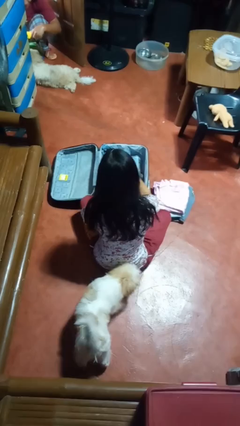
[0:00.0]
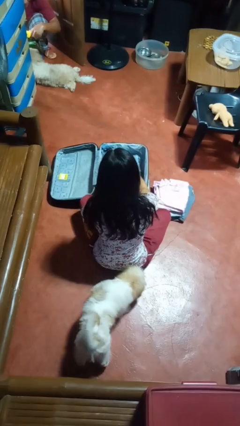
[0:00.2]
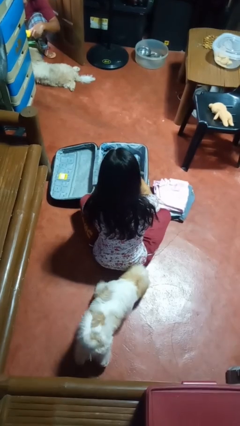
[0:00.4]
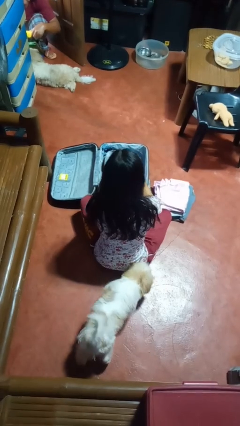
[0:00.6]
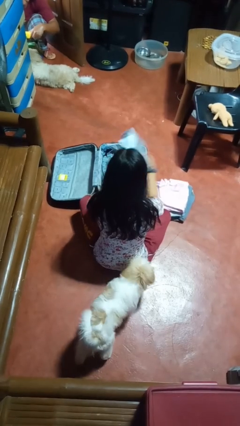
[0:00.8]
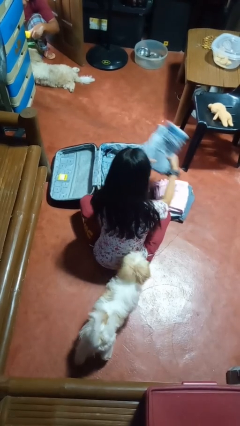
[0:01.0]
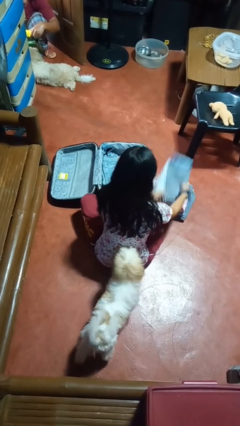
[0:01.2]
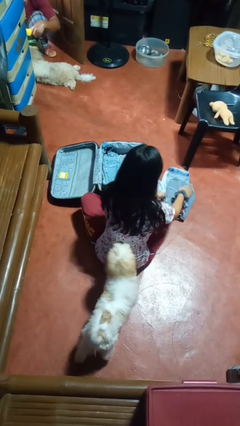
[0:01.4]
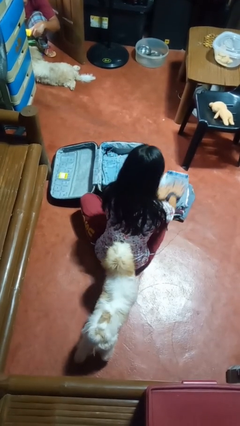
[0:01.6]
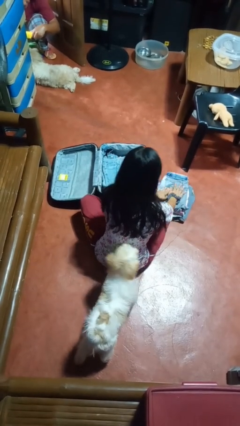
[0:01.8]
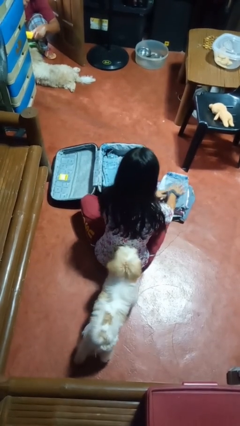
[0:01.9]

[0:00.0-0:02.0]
person unloads clothes from suitcase

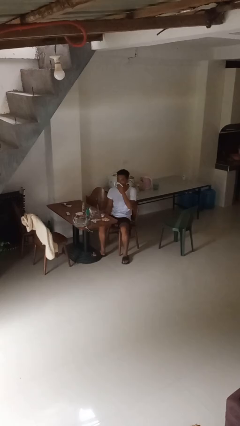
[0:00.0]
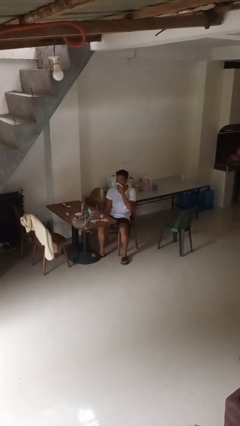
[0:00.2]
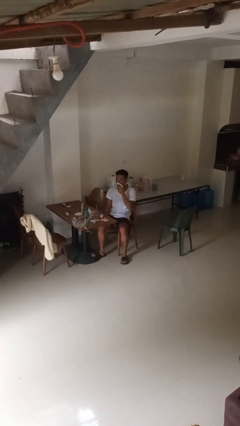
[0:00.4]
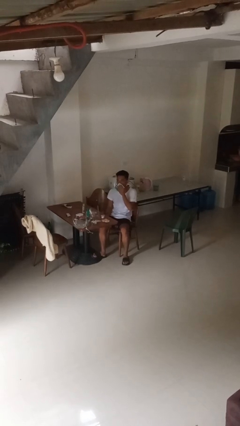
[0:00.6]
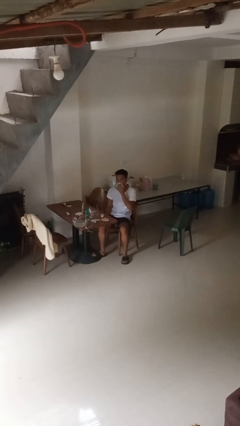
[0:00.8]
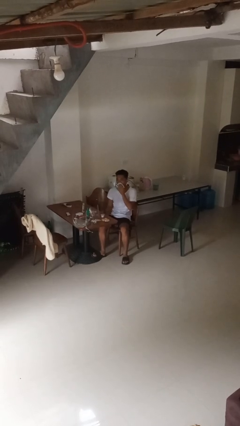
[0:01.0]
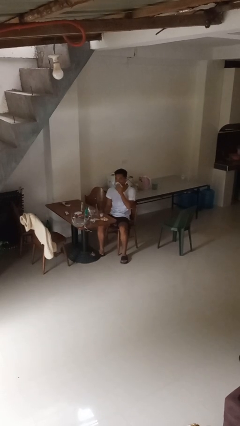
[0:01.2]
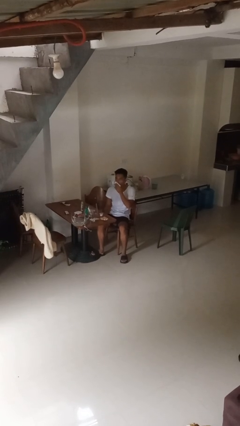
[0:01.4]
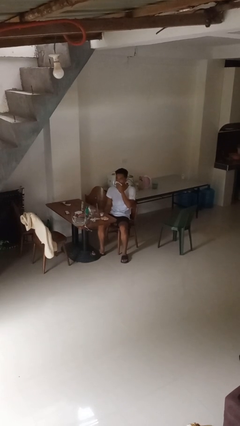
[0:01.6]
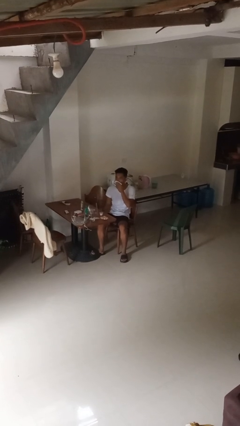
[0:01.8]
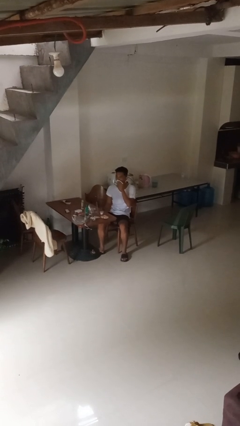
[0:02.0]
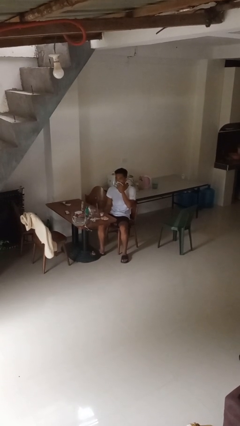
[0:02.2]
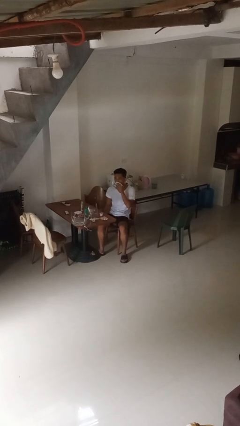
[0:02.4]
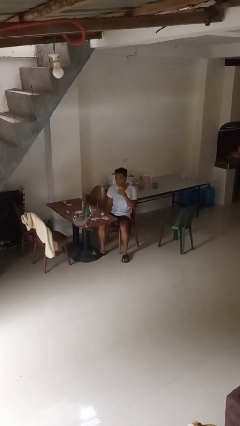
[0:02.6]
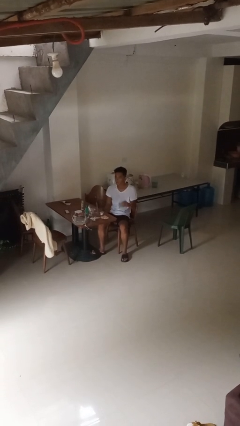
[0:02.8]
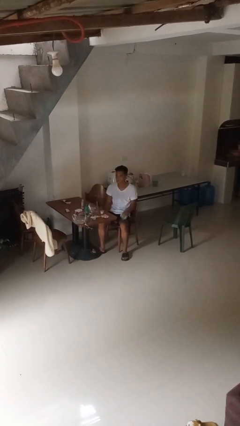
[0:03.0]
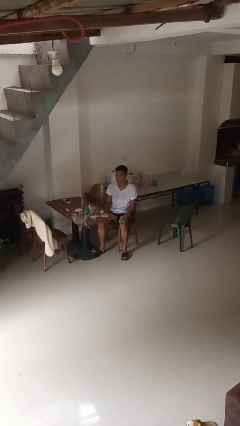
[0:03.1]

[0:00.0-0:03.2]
person wipes mouth with napkin

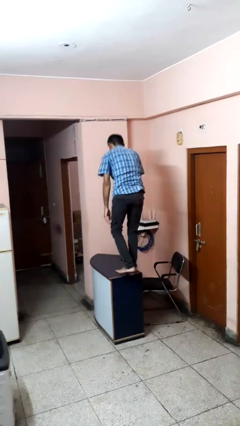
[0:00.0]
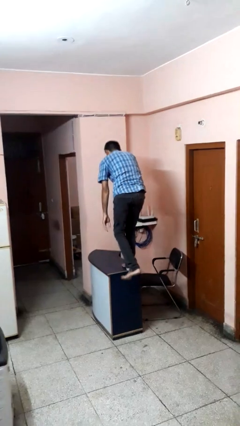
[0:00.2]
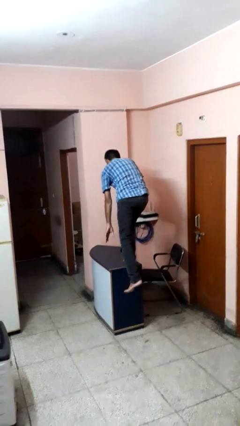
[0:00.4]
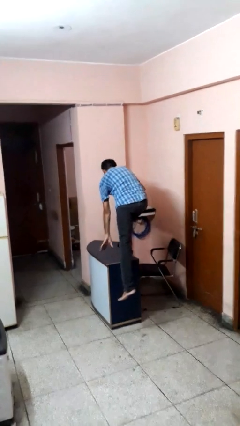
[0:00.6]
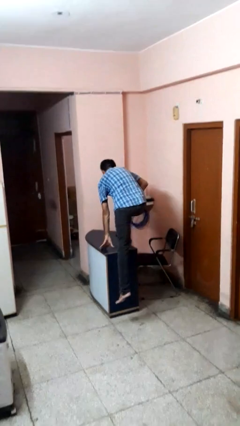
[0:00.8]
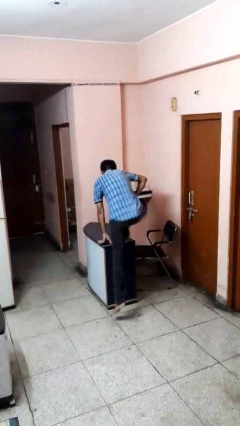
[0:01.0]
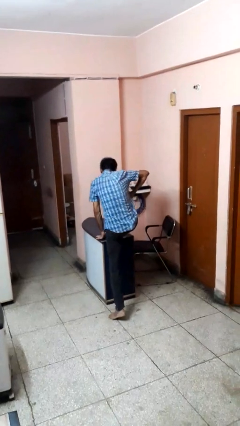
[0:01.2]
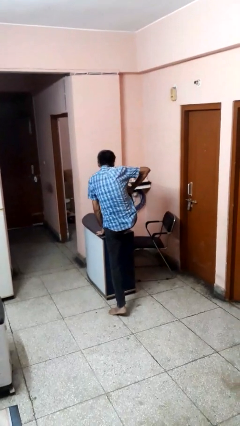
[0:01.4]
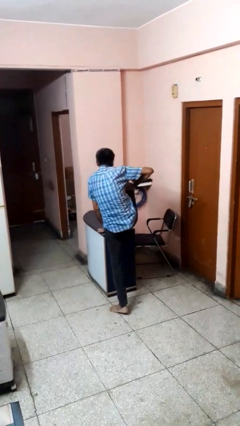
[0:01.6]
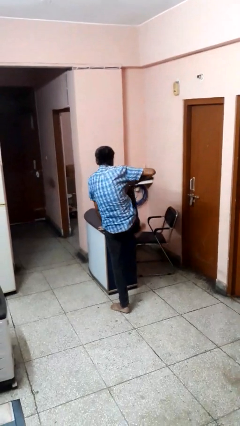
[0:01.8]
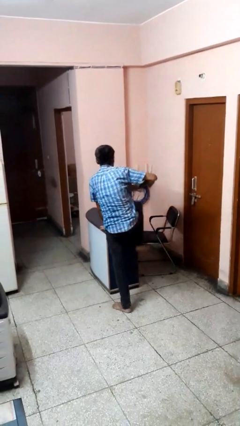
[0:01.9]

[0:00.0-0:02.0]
person climbs off table

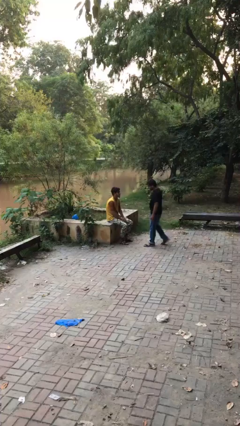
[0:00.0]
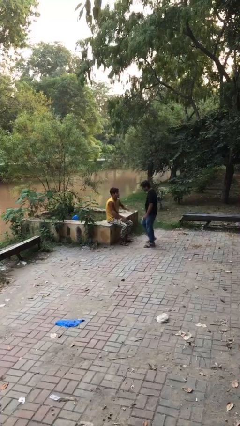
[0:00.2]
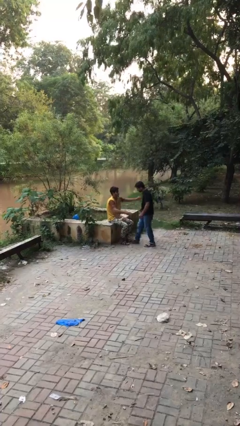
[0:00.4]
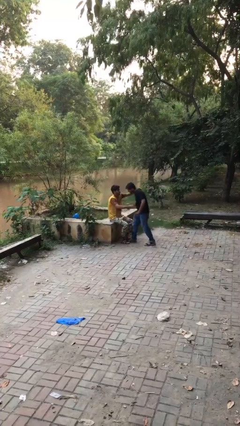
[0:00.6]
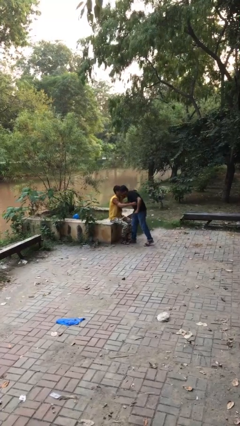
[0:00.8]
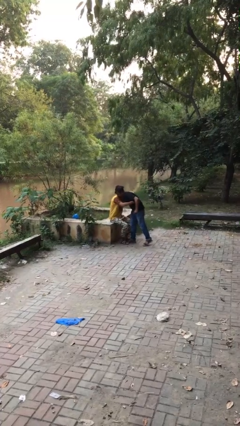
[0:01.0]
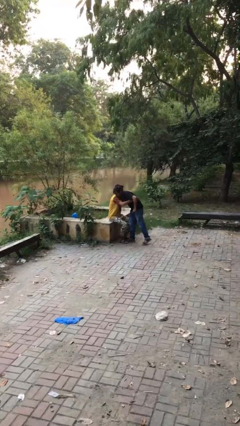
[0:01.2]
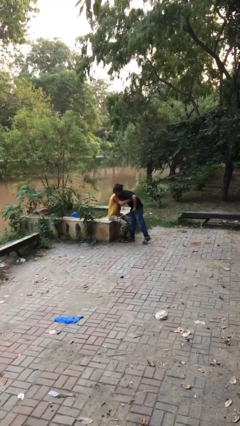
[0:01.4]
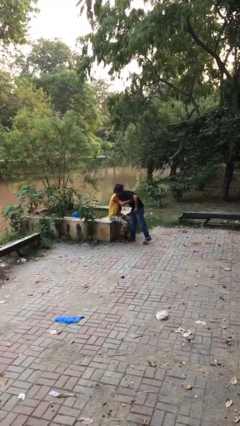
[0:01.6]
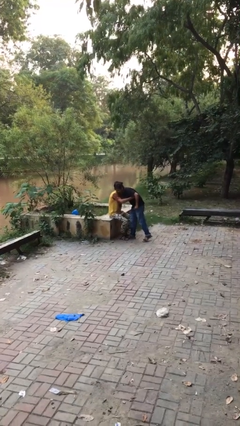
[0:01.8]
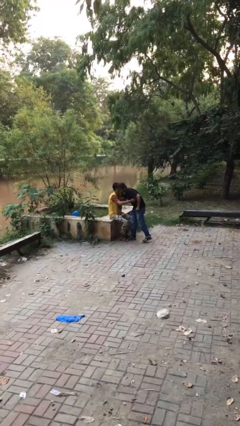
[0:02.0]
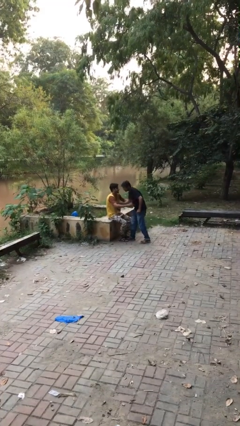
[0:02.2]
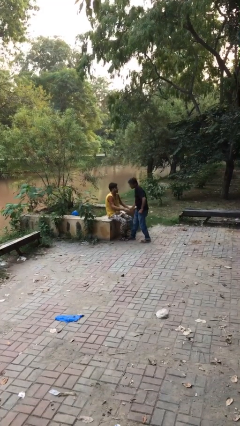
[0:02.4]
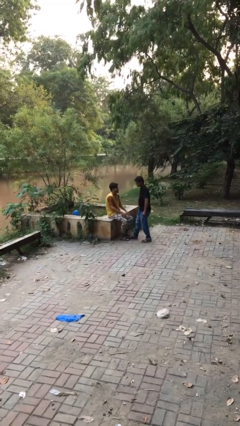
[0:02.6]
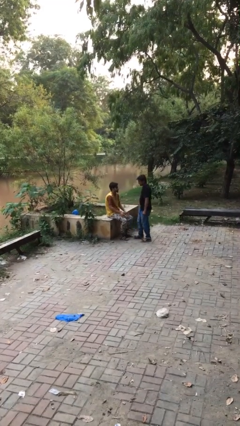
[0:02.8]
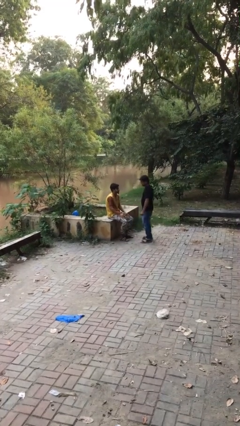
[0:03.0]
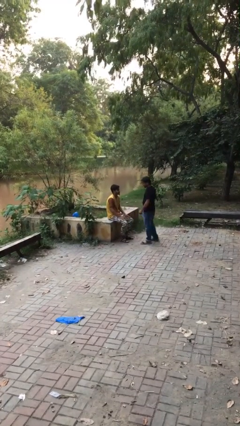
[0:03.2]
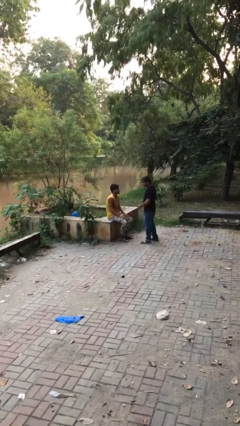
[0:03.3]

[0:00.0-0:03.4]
person embraces person

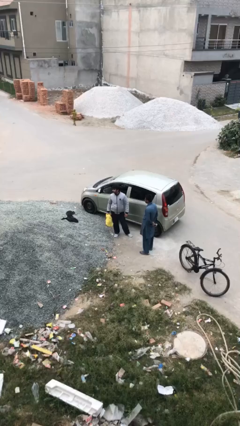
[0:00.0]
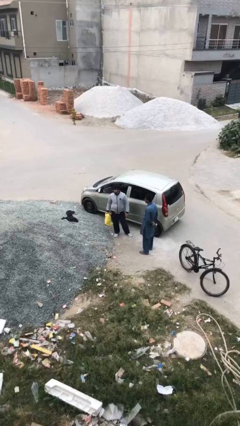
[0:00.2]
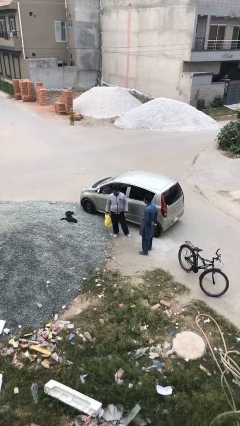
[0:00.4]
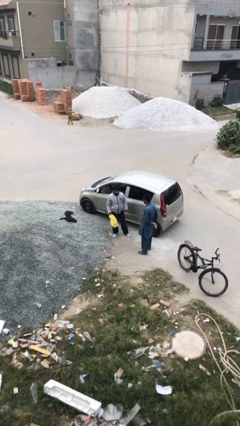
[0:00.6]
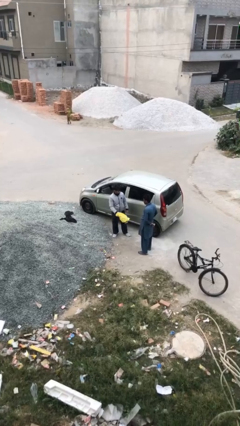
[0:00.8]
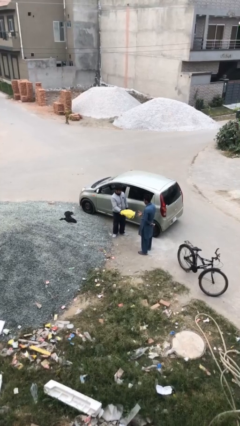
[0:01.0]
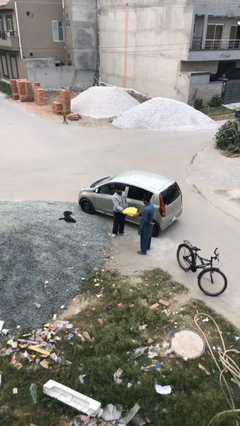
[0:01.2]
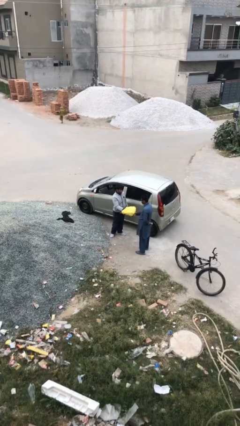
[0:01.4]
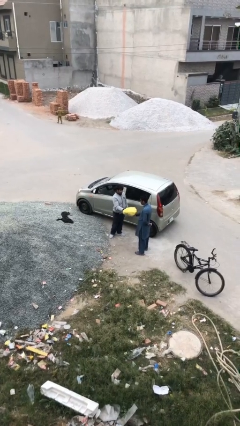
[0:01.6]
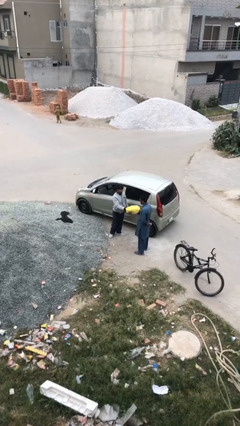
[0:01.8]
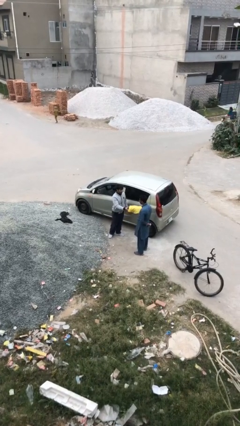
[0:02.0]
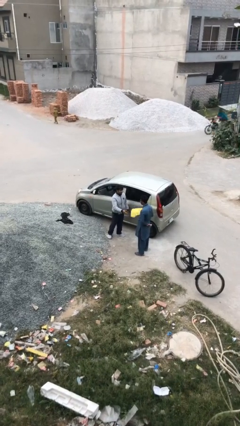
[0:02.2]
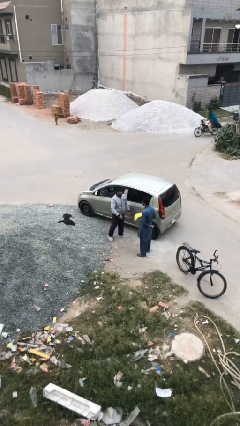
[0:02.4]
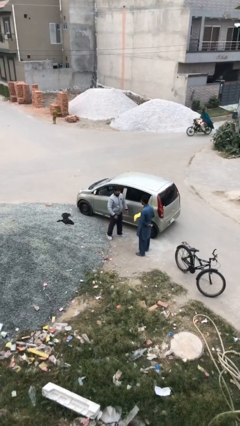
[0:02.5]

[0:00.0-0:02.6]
person transfers object to person

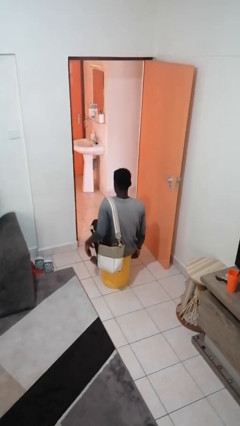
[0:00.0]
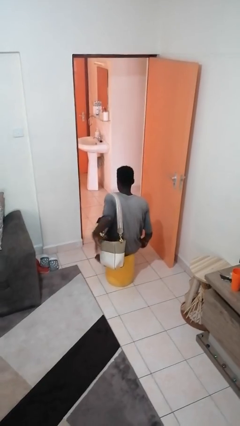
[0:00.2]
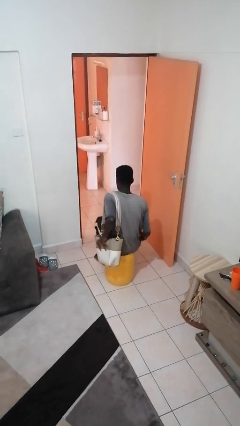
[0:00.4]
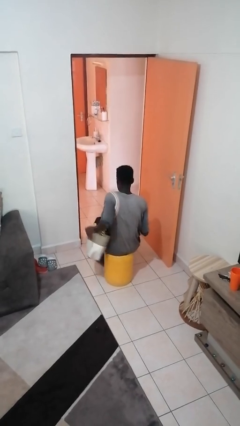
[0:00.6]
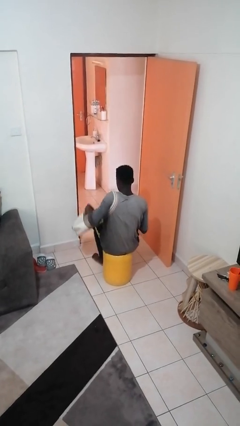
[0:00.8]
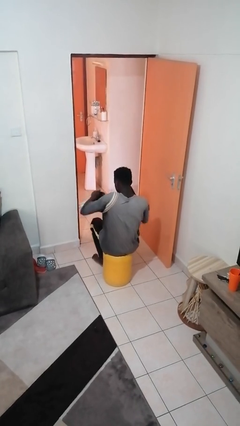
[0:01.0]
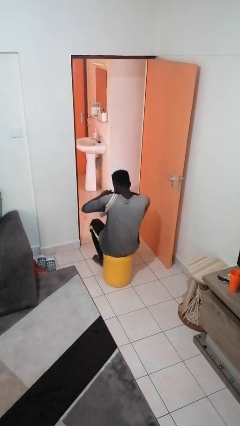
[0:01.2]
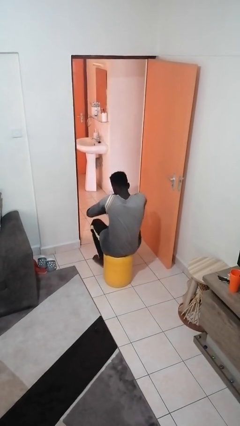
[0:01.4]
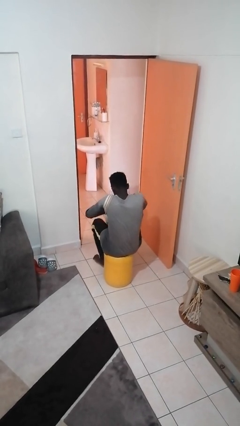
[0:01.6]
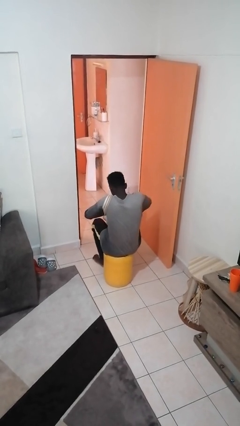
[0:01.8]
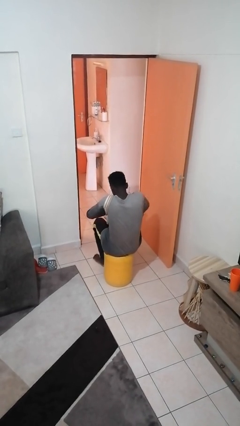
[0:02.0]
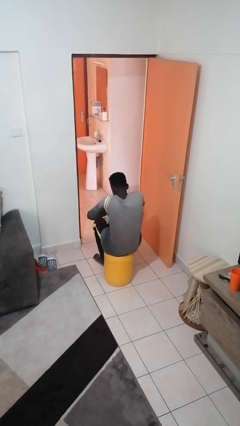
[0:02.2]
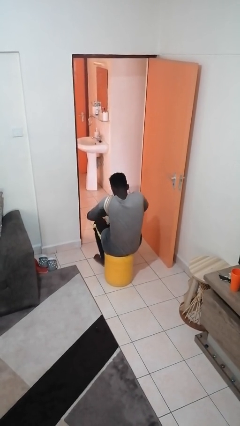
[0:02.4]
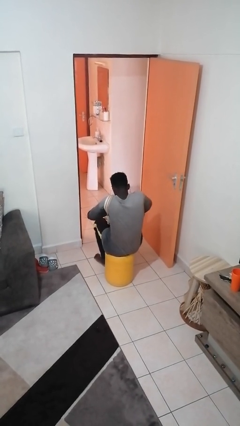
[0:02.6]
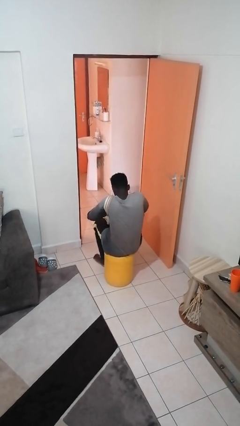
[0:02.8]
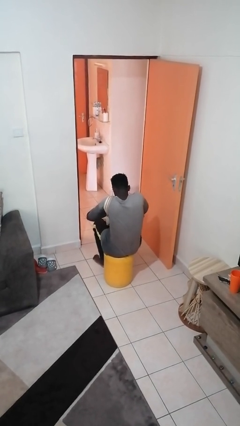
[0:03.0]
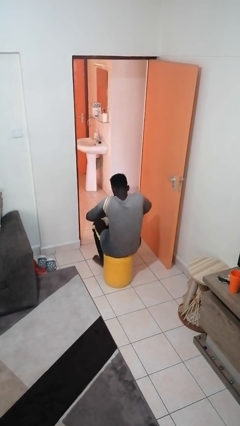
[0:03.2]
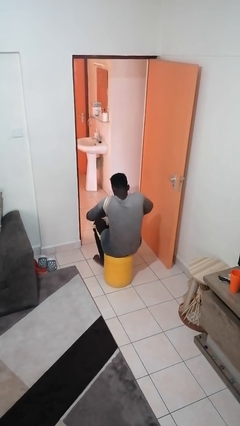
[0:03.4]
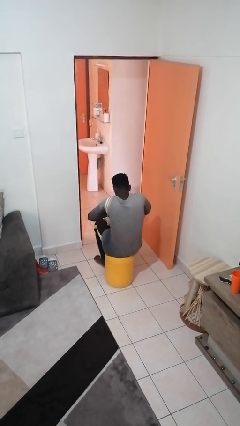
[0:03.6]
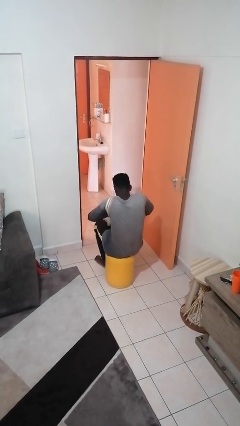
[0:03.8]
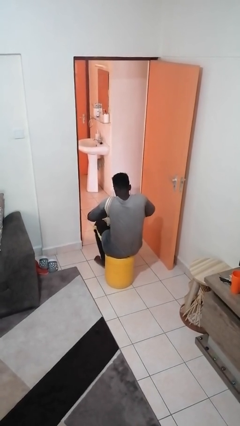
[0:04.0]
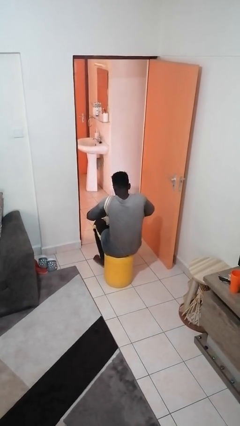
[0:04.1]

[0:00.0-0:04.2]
person searches in purse

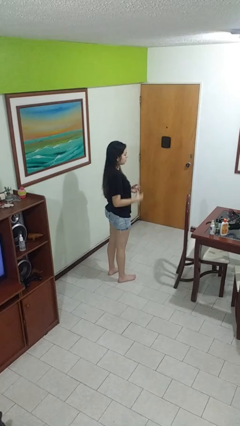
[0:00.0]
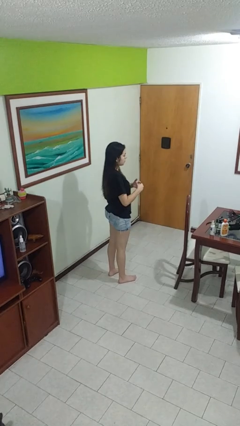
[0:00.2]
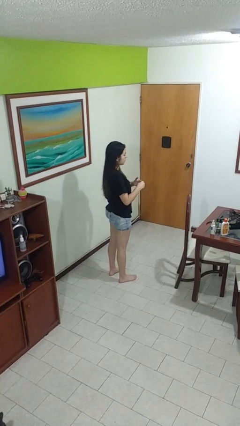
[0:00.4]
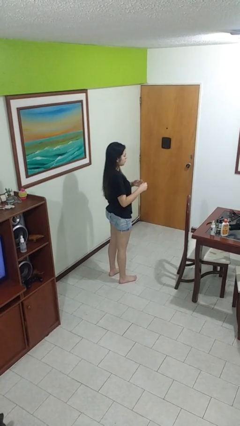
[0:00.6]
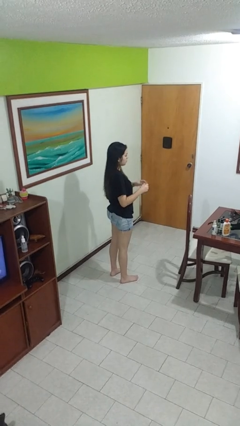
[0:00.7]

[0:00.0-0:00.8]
person takes off ring
